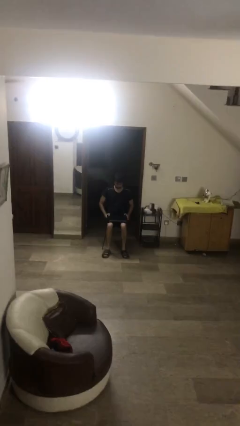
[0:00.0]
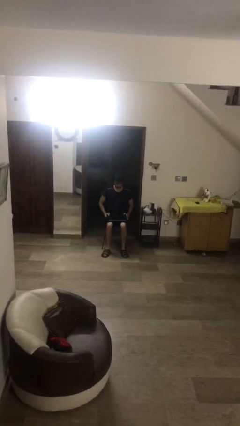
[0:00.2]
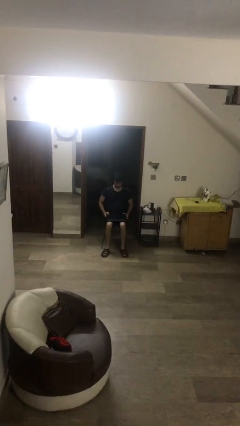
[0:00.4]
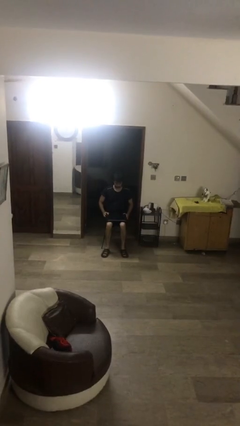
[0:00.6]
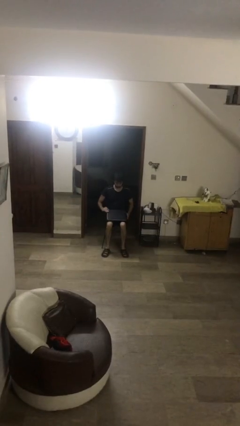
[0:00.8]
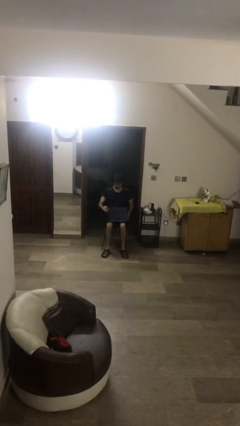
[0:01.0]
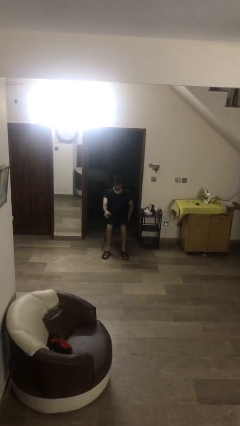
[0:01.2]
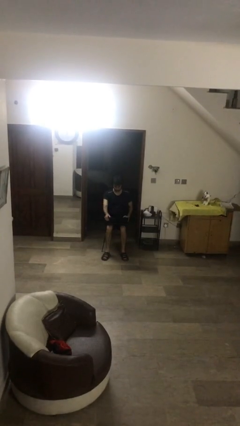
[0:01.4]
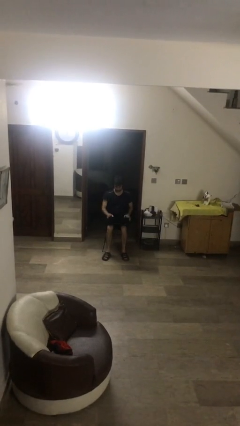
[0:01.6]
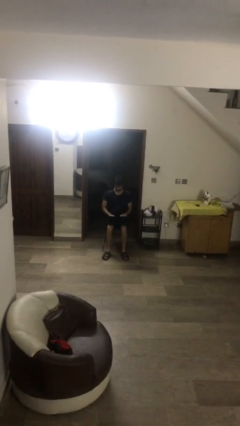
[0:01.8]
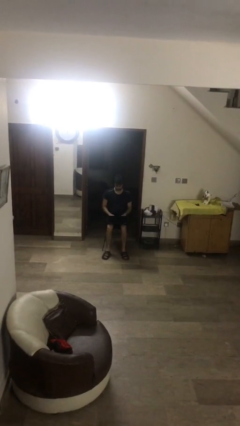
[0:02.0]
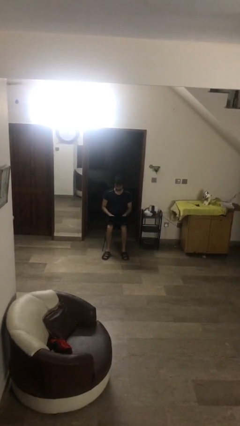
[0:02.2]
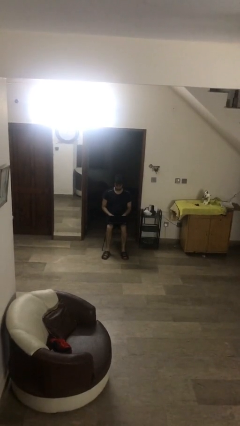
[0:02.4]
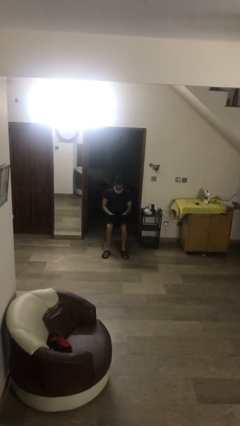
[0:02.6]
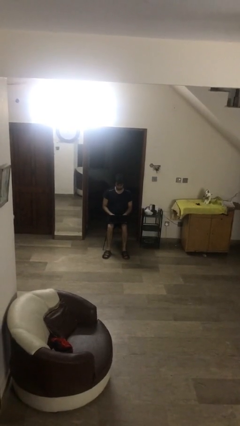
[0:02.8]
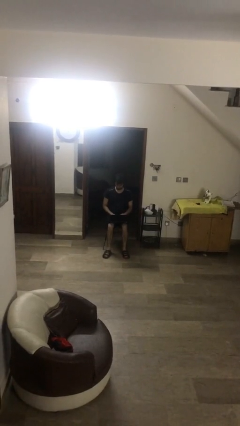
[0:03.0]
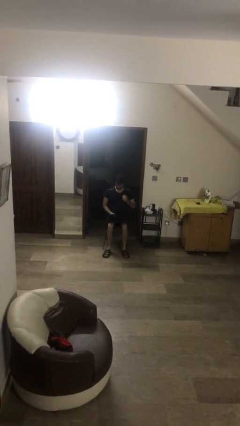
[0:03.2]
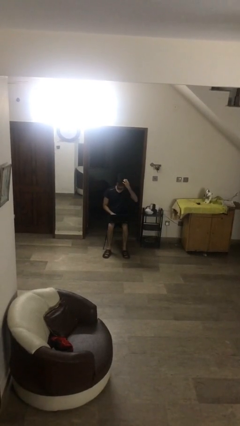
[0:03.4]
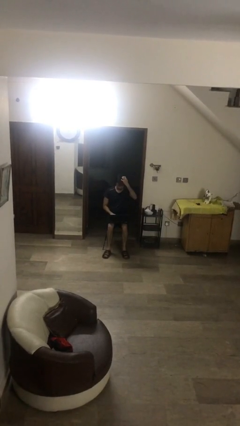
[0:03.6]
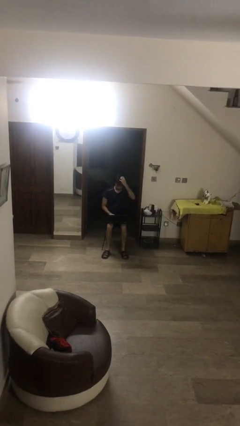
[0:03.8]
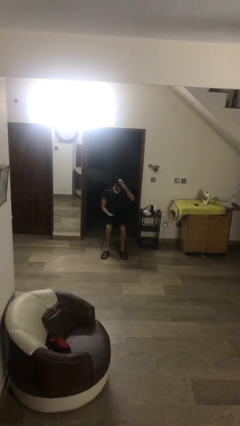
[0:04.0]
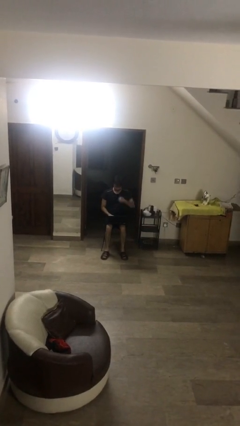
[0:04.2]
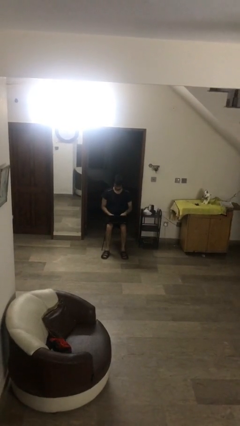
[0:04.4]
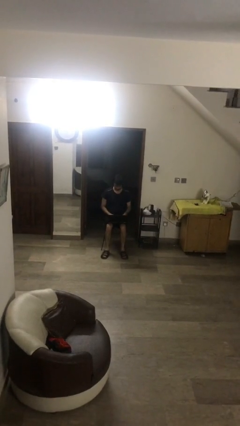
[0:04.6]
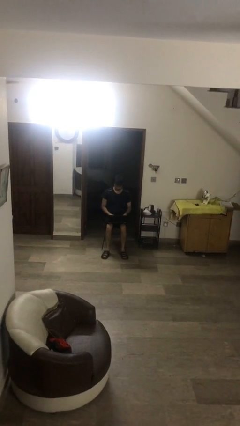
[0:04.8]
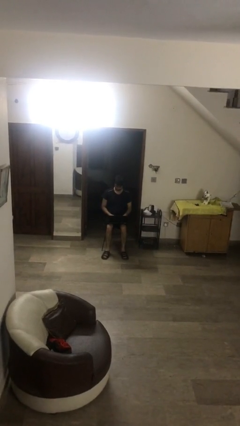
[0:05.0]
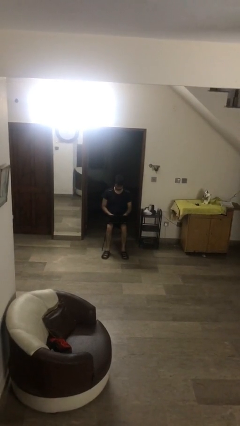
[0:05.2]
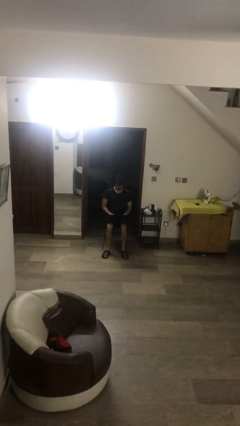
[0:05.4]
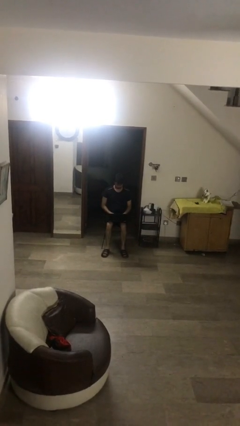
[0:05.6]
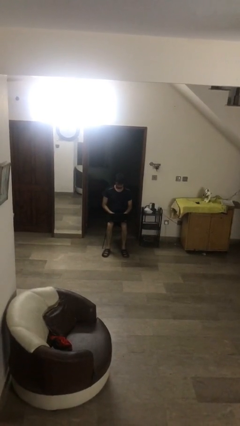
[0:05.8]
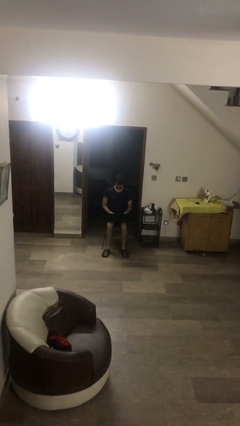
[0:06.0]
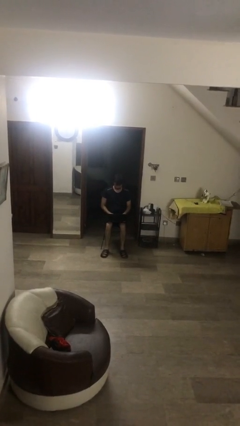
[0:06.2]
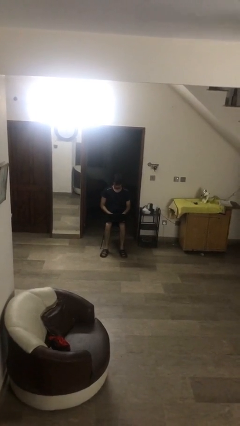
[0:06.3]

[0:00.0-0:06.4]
person interacts with laptop

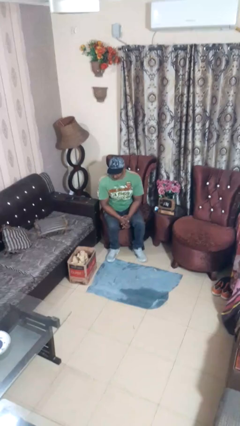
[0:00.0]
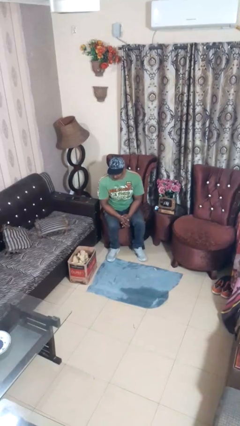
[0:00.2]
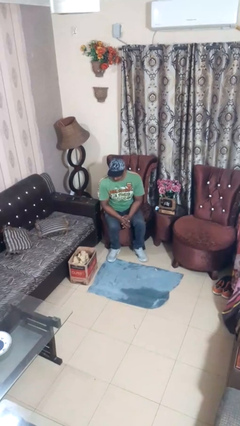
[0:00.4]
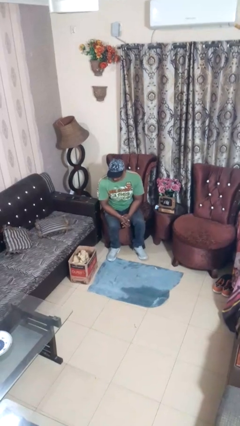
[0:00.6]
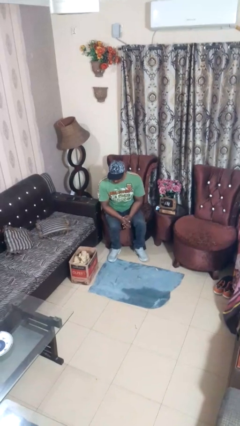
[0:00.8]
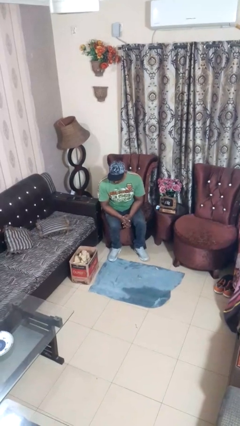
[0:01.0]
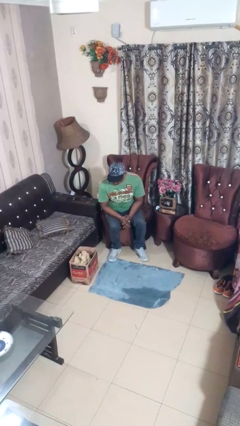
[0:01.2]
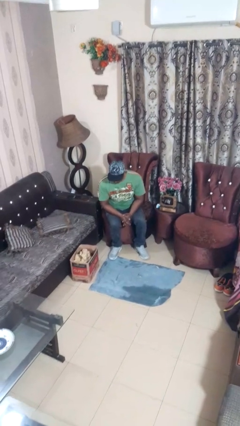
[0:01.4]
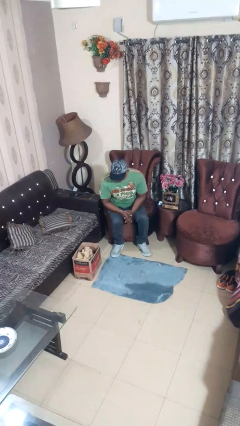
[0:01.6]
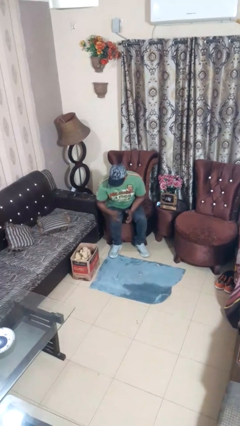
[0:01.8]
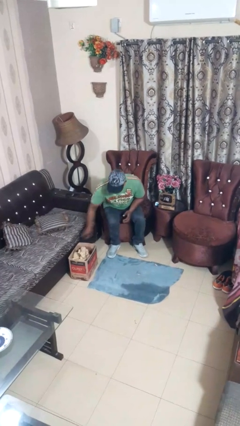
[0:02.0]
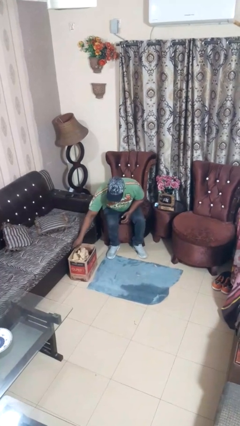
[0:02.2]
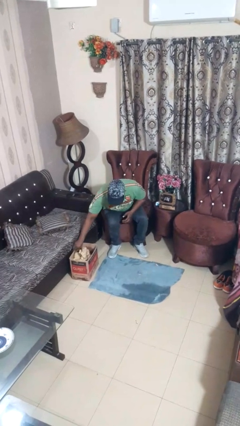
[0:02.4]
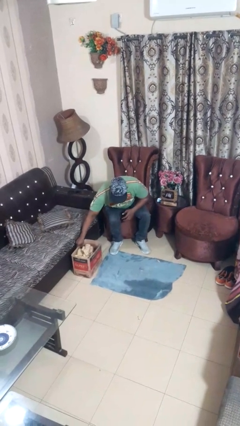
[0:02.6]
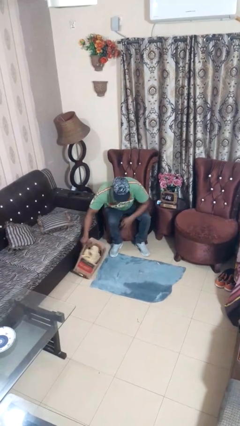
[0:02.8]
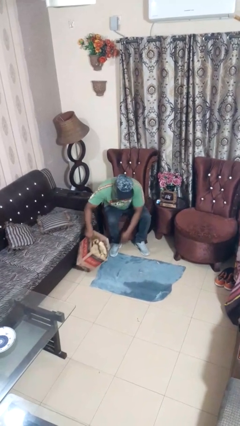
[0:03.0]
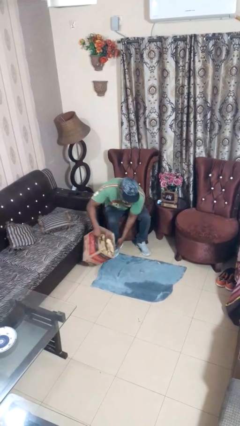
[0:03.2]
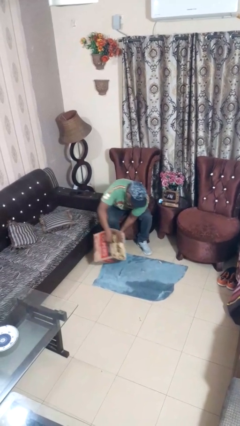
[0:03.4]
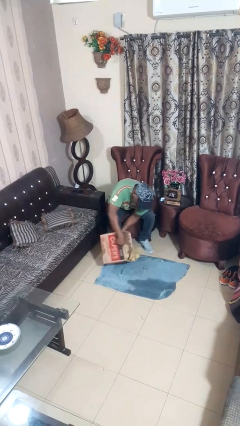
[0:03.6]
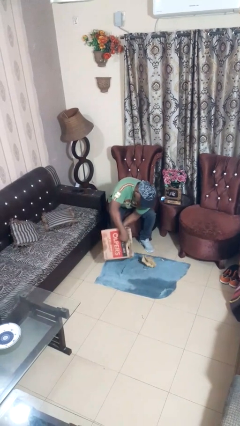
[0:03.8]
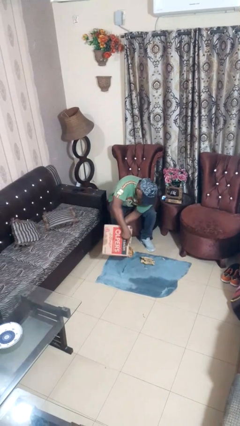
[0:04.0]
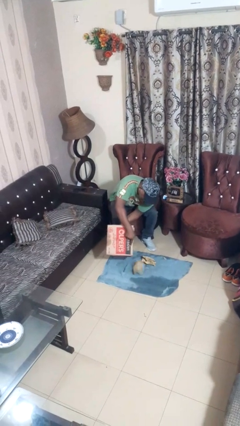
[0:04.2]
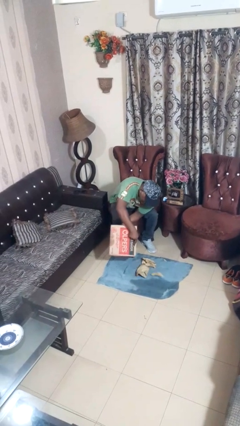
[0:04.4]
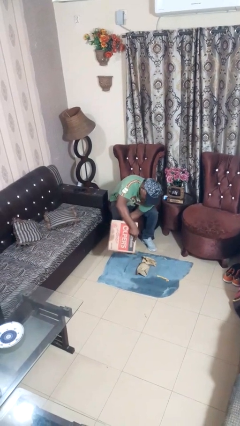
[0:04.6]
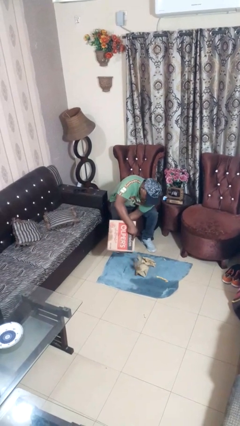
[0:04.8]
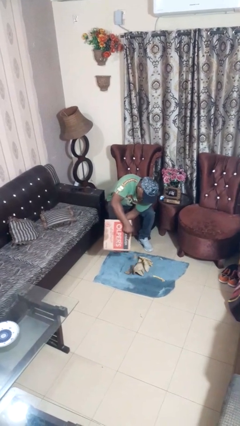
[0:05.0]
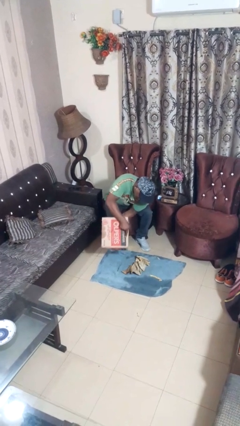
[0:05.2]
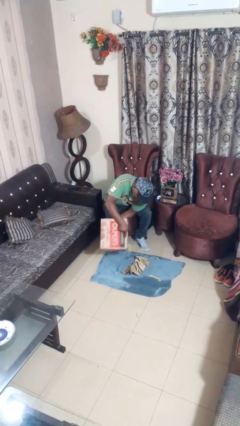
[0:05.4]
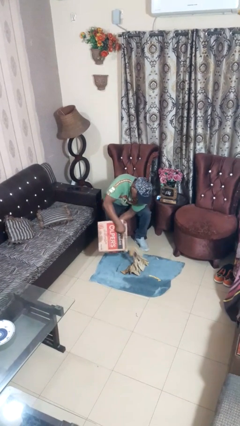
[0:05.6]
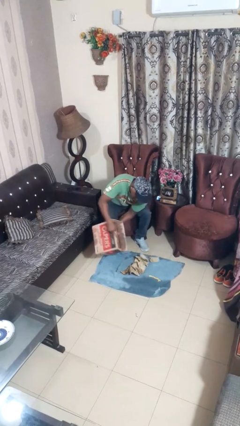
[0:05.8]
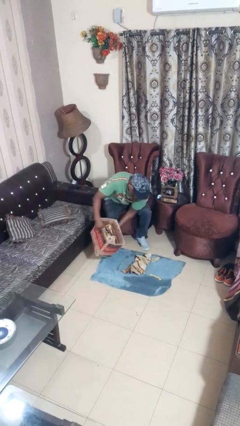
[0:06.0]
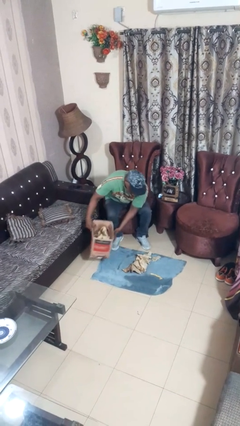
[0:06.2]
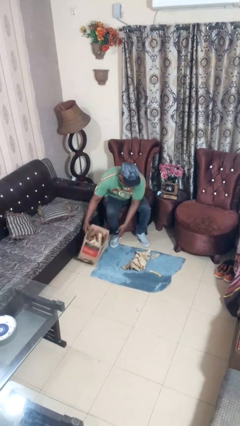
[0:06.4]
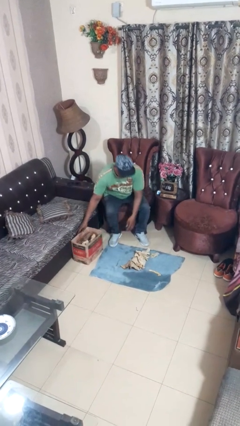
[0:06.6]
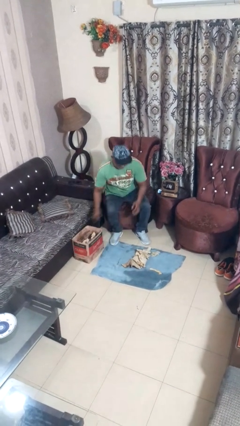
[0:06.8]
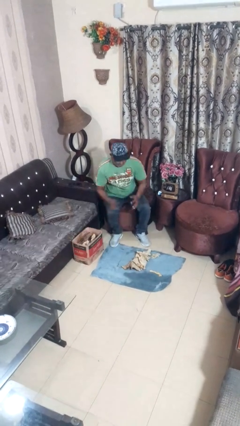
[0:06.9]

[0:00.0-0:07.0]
person unloads box onto floor

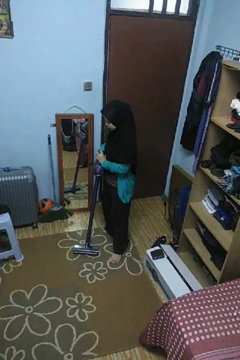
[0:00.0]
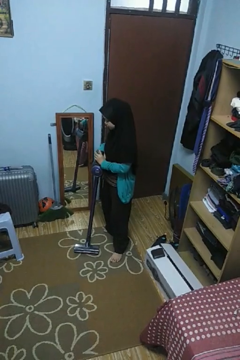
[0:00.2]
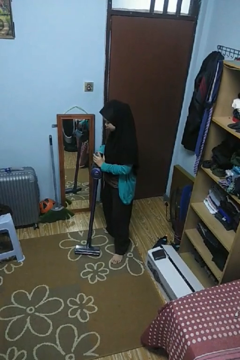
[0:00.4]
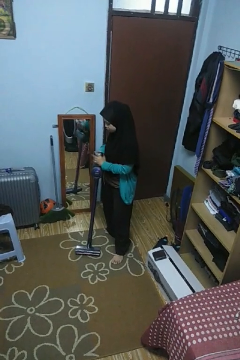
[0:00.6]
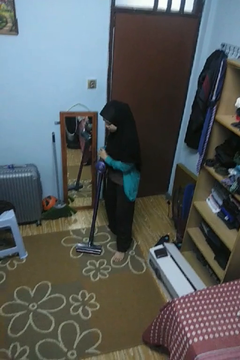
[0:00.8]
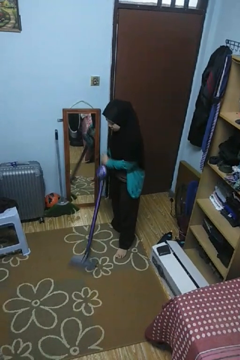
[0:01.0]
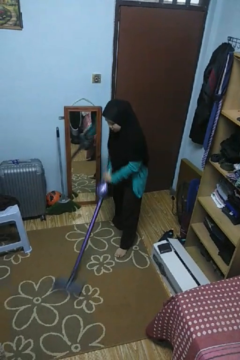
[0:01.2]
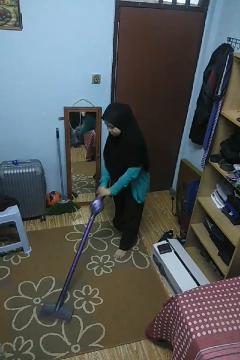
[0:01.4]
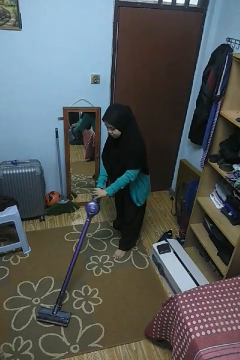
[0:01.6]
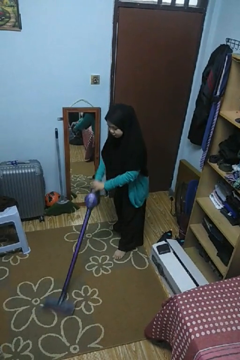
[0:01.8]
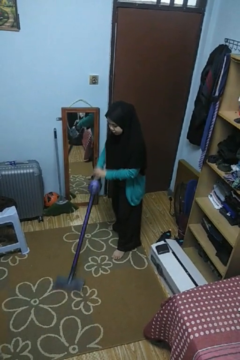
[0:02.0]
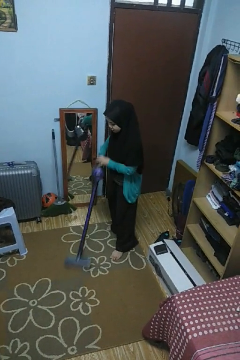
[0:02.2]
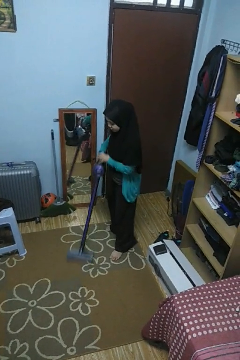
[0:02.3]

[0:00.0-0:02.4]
person vacuums carpet

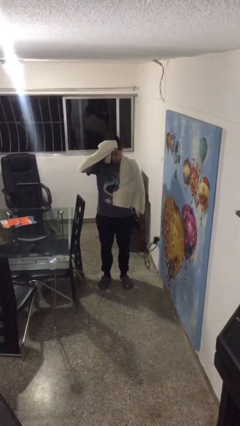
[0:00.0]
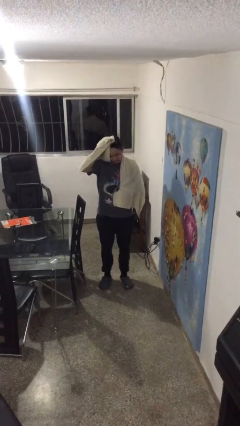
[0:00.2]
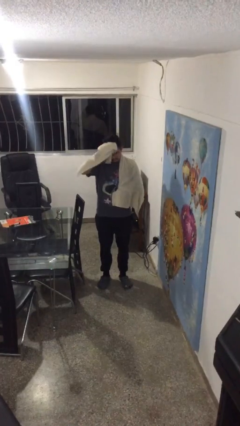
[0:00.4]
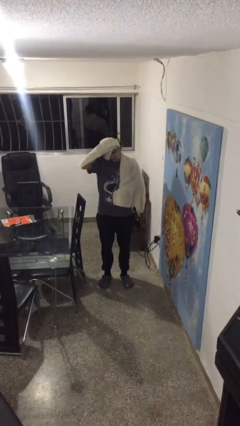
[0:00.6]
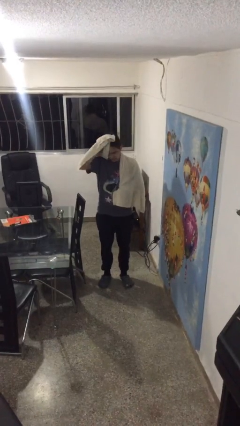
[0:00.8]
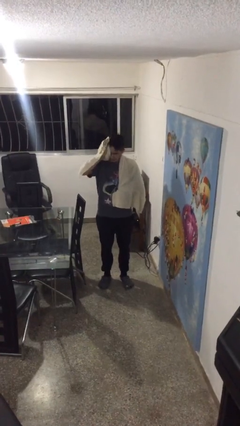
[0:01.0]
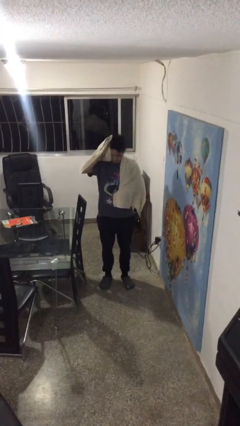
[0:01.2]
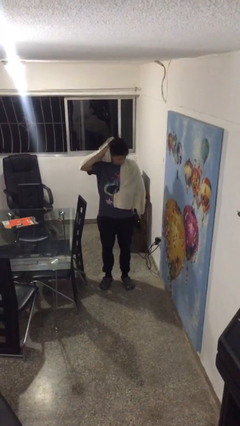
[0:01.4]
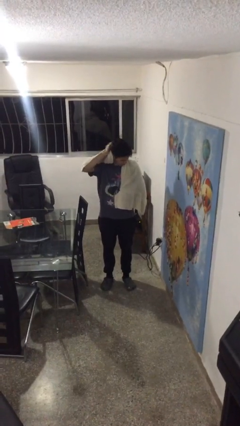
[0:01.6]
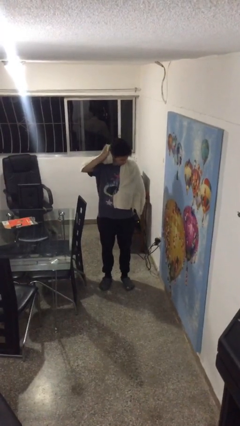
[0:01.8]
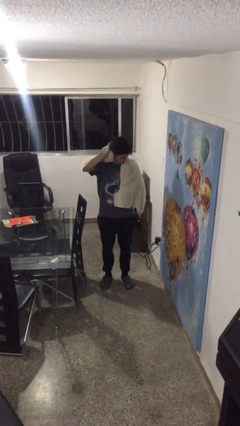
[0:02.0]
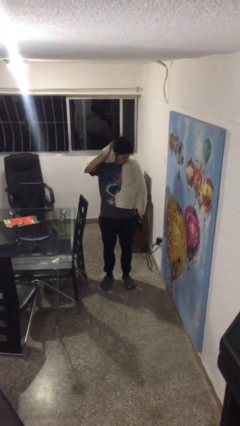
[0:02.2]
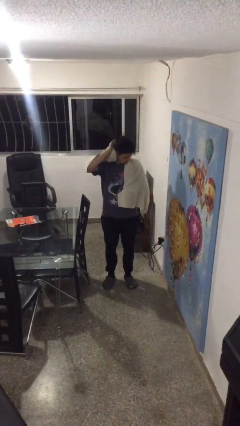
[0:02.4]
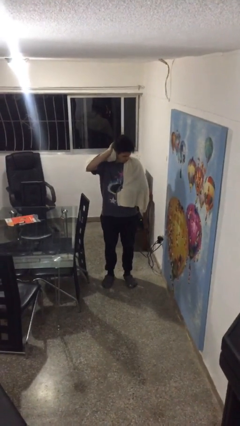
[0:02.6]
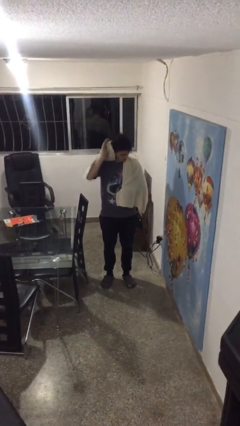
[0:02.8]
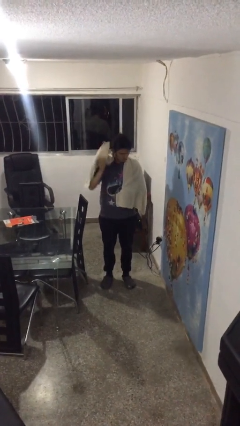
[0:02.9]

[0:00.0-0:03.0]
person dries hair with towel
